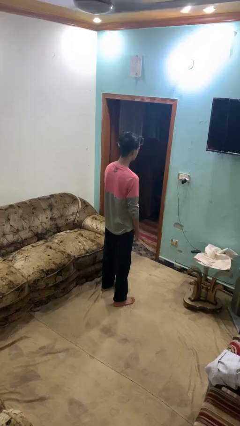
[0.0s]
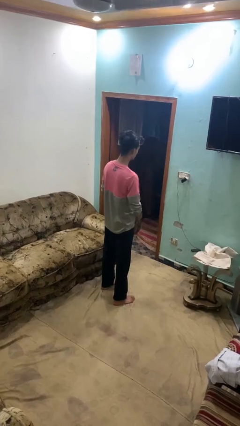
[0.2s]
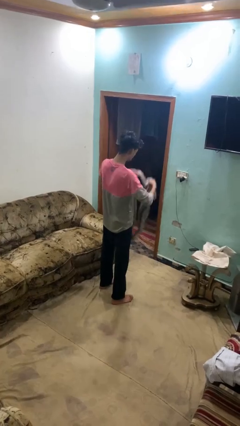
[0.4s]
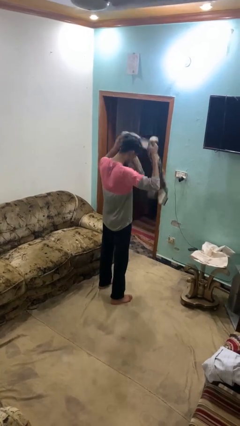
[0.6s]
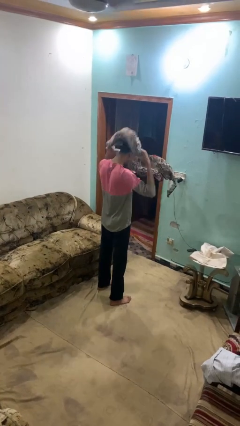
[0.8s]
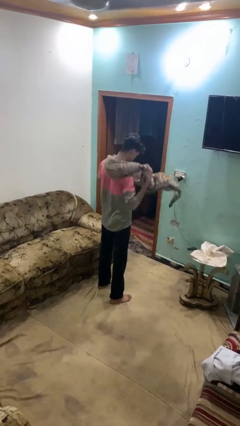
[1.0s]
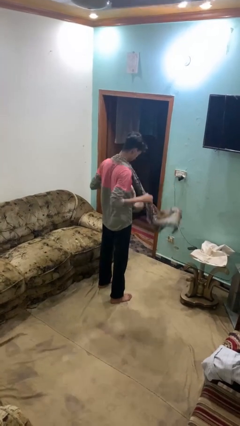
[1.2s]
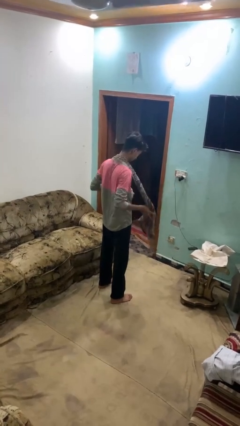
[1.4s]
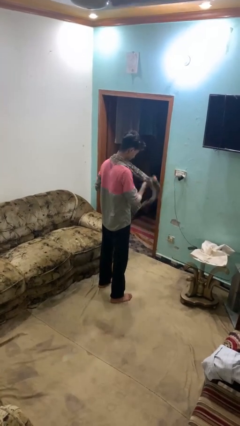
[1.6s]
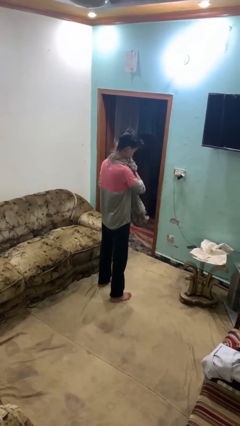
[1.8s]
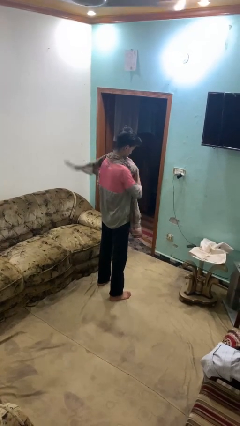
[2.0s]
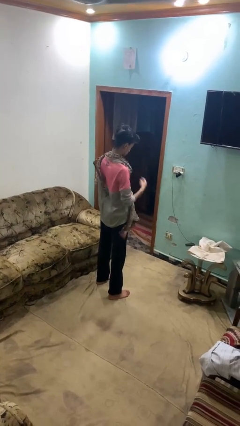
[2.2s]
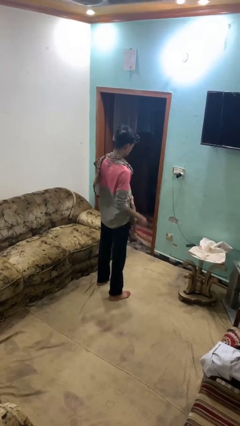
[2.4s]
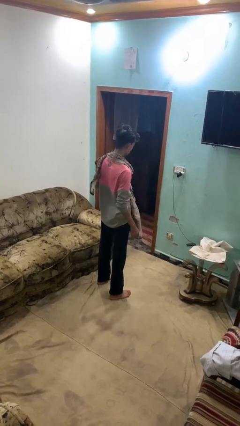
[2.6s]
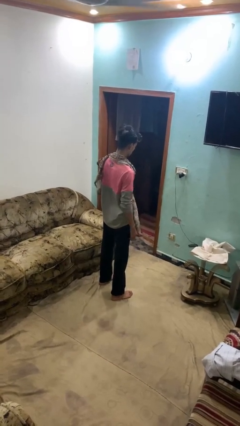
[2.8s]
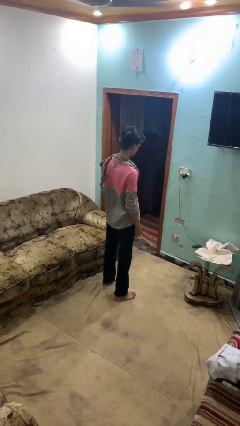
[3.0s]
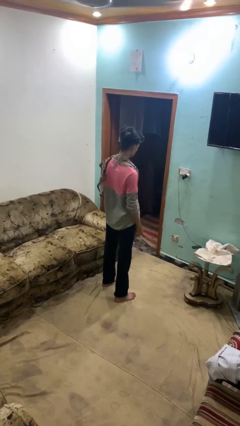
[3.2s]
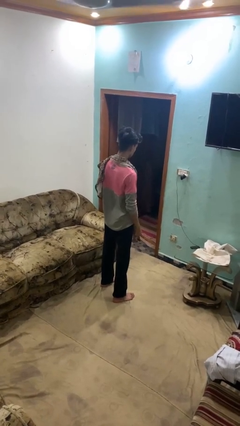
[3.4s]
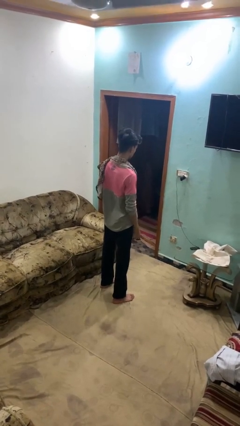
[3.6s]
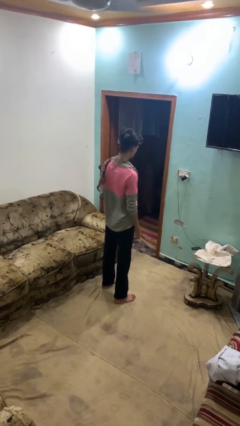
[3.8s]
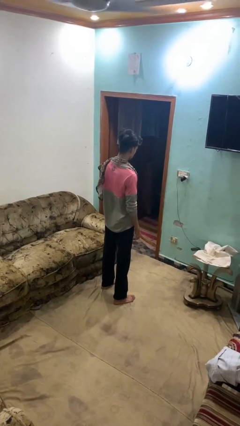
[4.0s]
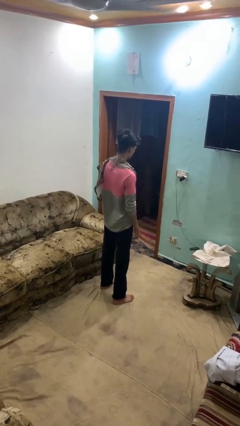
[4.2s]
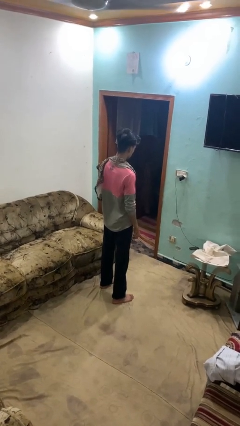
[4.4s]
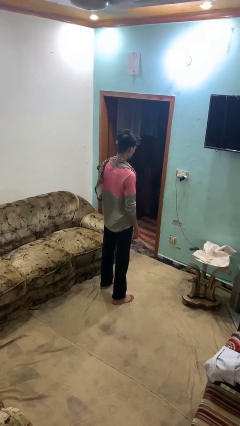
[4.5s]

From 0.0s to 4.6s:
person puts on scarf

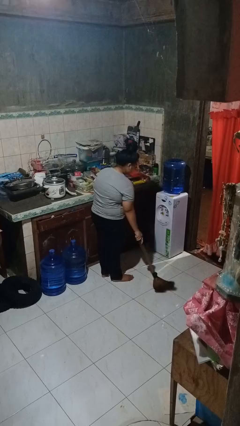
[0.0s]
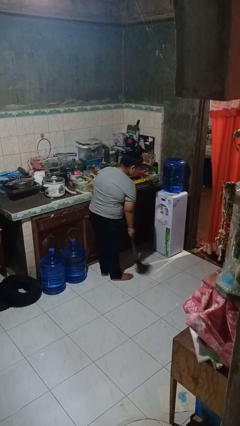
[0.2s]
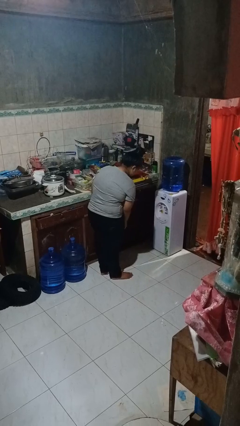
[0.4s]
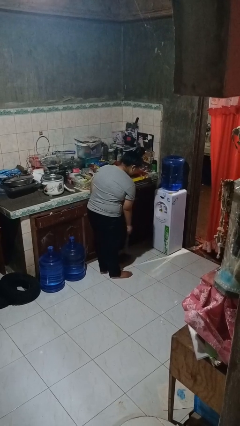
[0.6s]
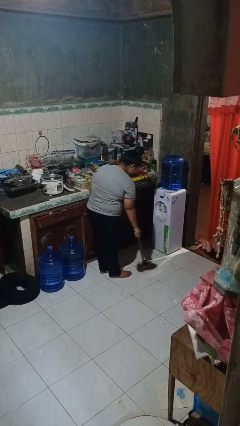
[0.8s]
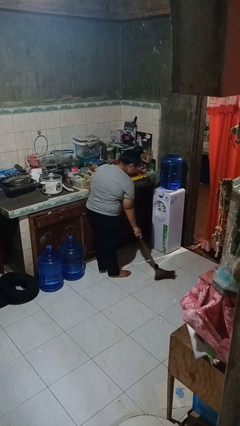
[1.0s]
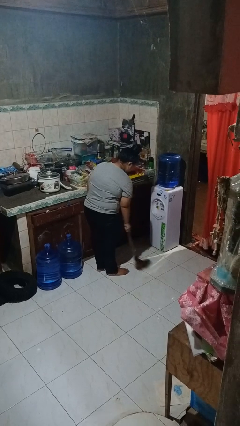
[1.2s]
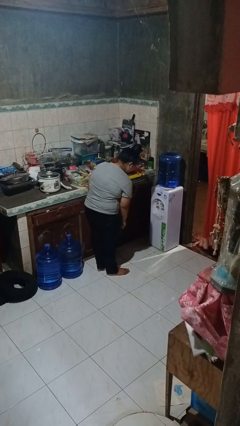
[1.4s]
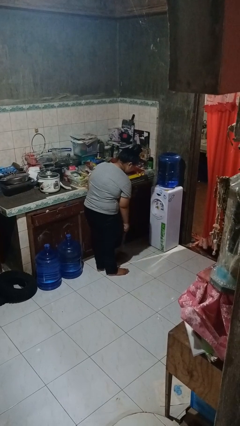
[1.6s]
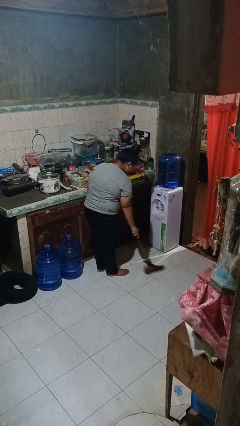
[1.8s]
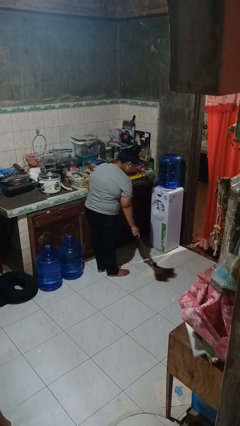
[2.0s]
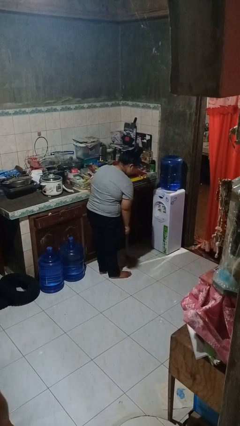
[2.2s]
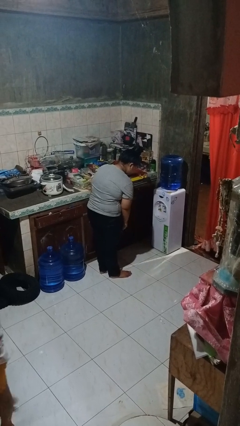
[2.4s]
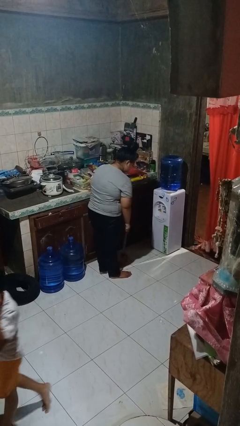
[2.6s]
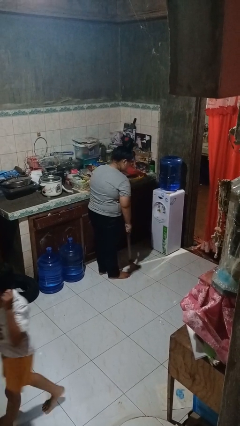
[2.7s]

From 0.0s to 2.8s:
person sweeps floor

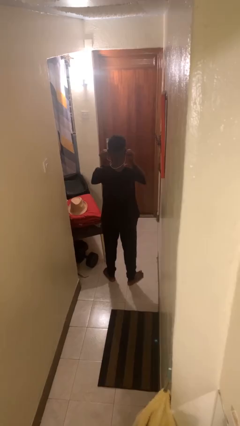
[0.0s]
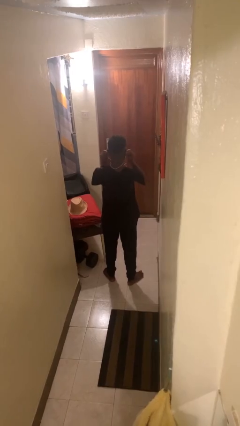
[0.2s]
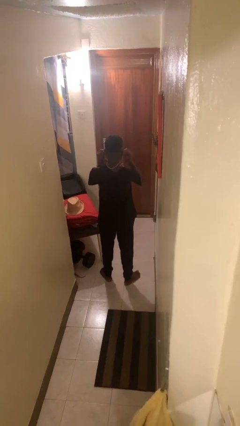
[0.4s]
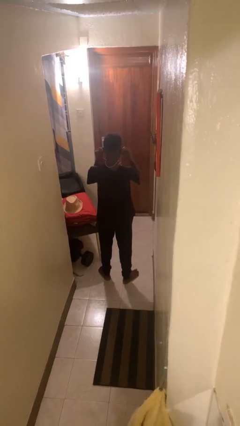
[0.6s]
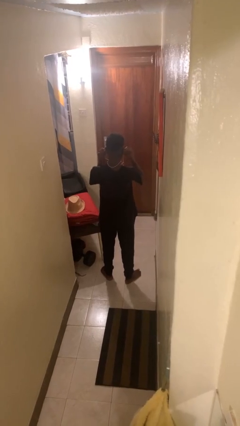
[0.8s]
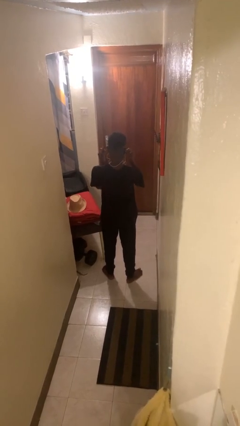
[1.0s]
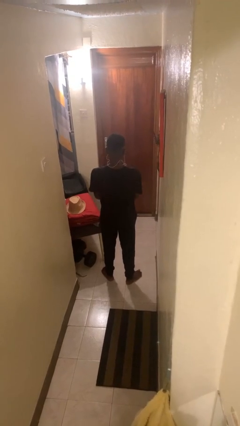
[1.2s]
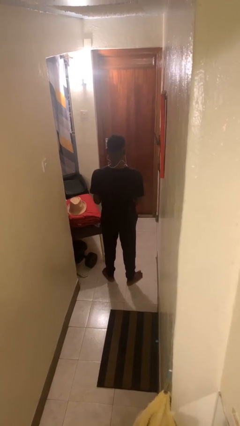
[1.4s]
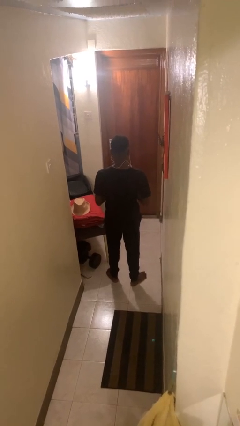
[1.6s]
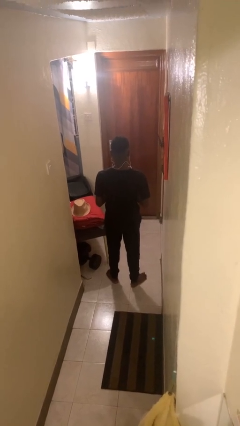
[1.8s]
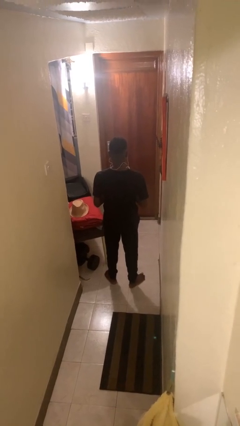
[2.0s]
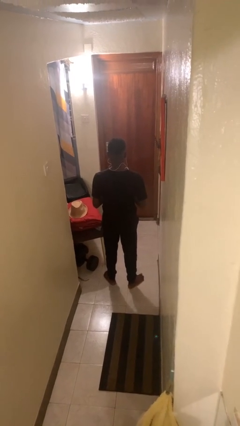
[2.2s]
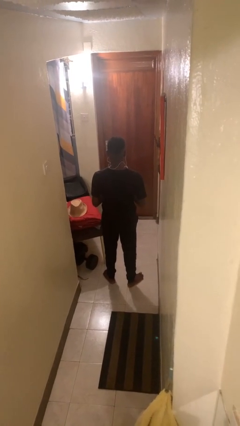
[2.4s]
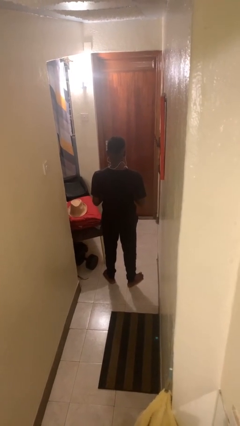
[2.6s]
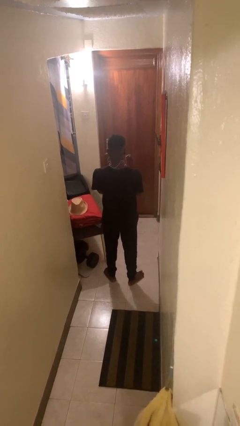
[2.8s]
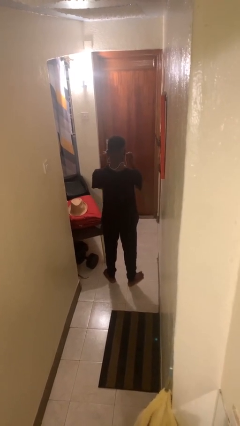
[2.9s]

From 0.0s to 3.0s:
person puts on headphones

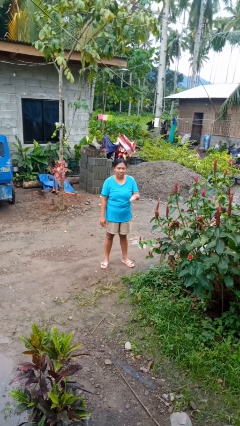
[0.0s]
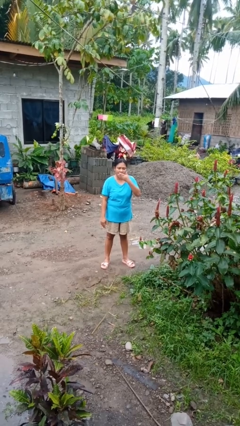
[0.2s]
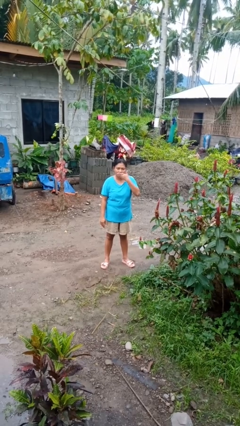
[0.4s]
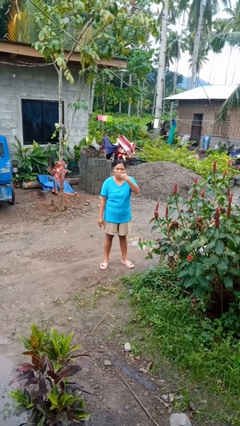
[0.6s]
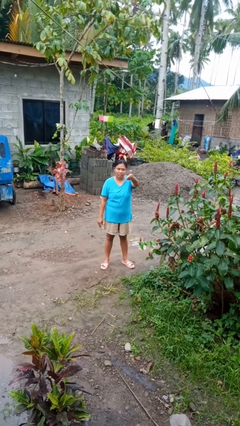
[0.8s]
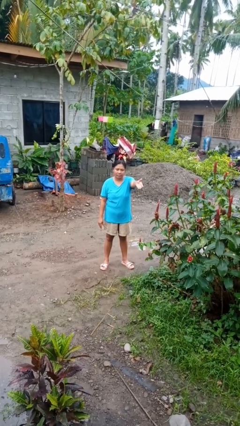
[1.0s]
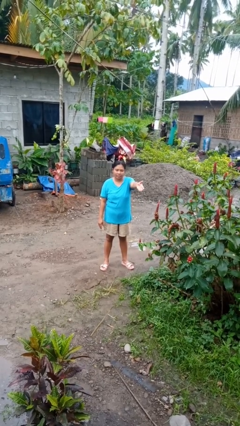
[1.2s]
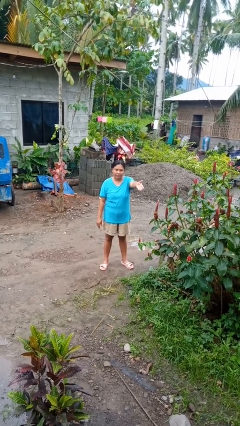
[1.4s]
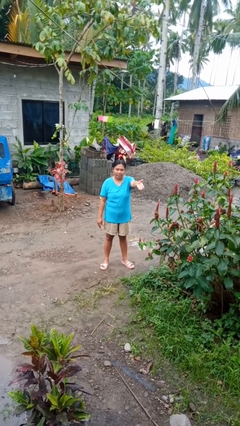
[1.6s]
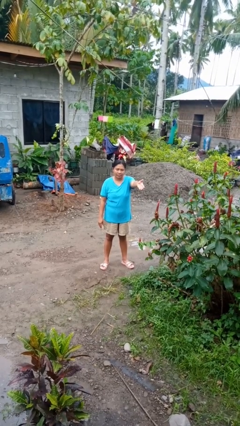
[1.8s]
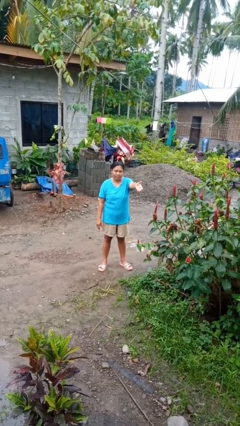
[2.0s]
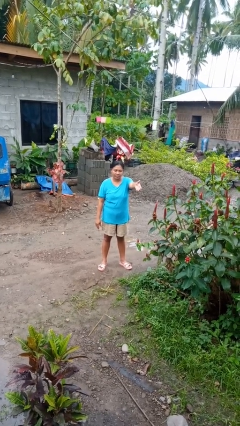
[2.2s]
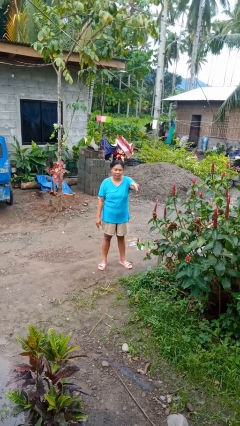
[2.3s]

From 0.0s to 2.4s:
person gestures blow kiss

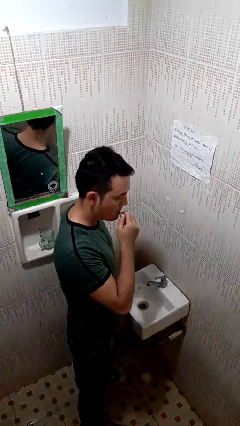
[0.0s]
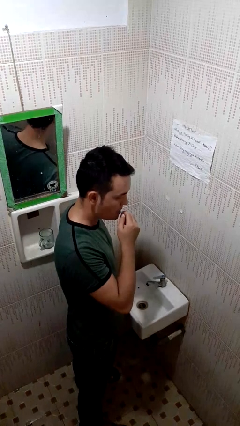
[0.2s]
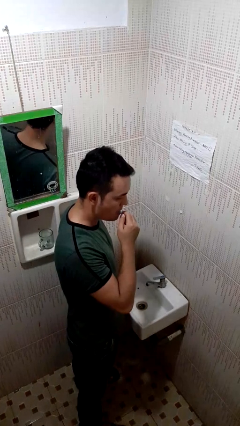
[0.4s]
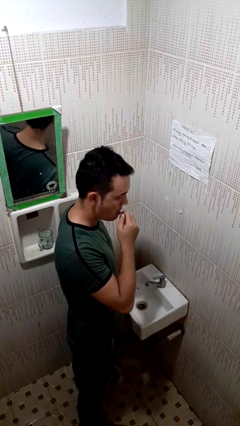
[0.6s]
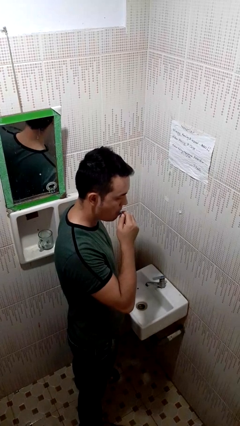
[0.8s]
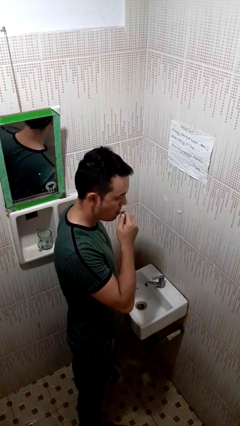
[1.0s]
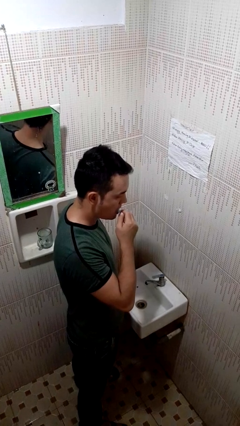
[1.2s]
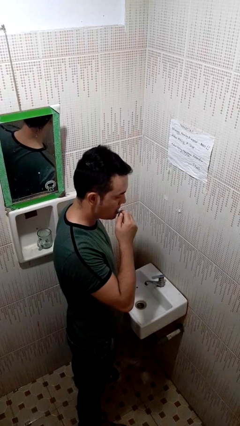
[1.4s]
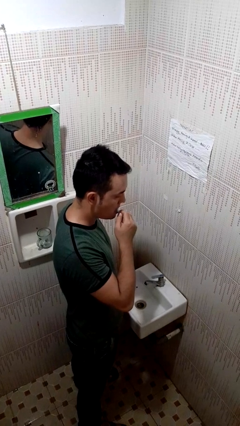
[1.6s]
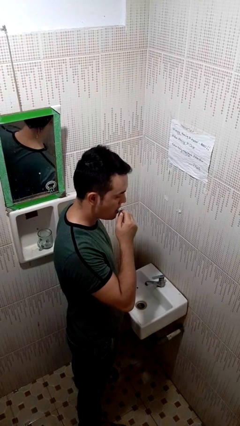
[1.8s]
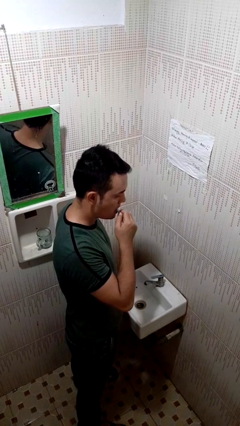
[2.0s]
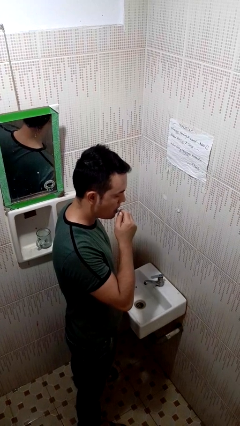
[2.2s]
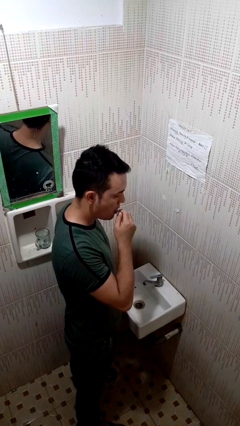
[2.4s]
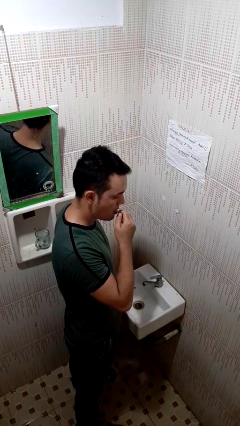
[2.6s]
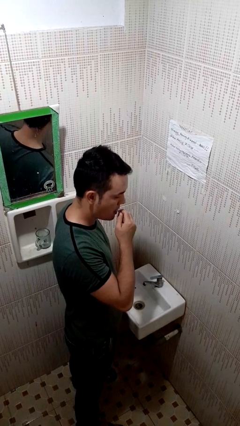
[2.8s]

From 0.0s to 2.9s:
person flosses

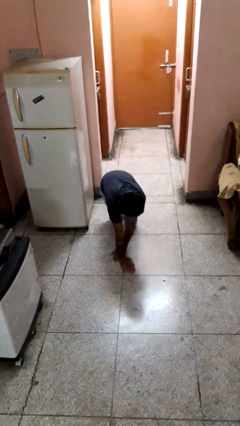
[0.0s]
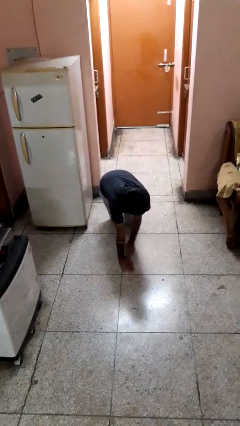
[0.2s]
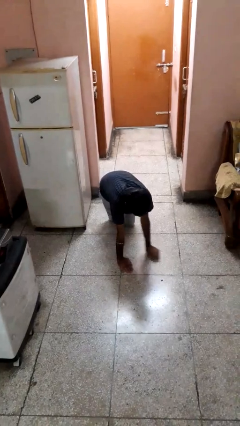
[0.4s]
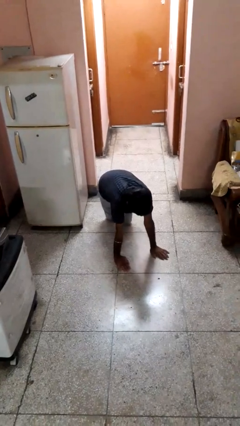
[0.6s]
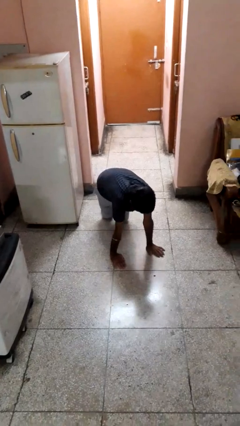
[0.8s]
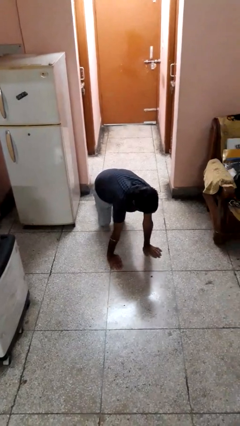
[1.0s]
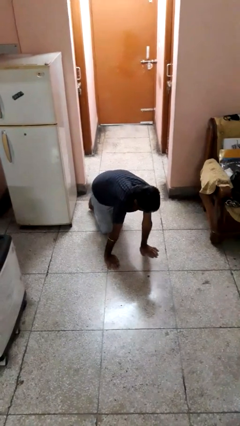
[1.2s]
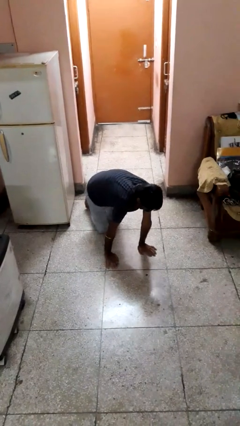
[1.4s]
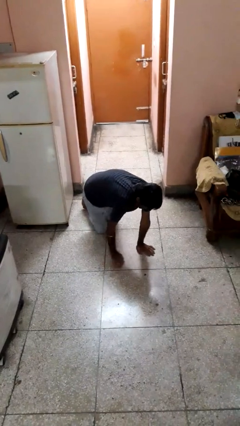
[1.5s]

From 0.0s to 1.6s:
person crawls

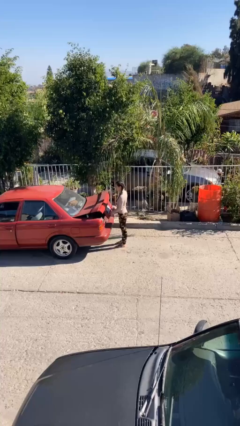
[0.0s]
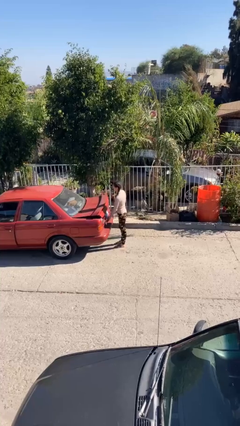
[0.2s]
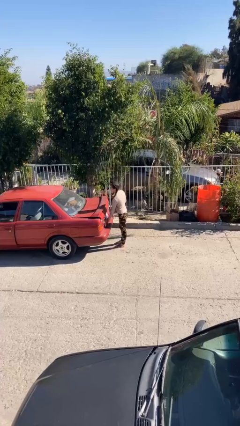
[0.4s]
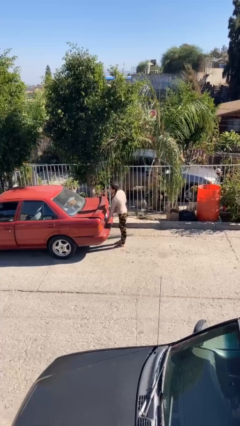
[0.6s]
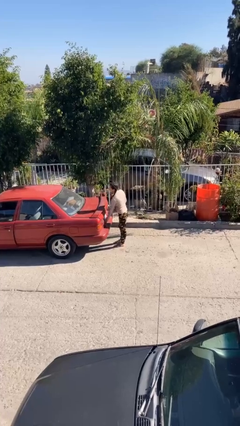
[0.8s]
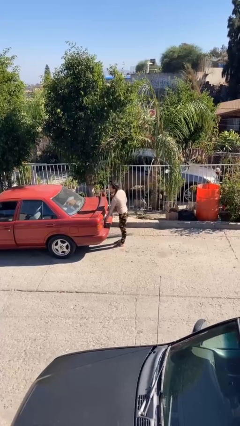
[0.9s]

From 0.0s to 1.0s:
person closes car trunk
